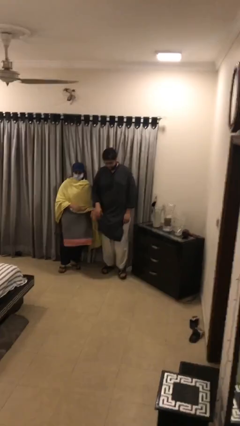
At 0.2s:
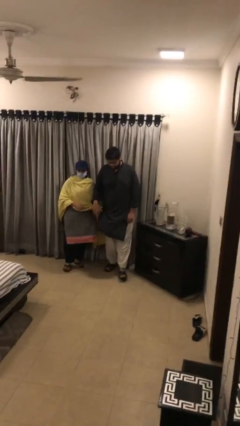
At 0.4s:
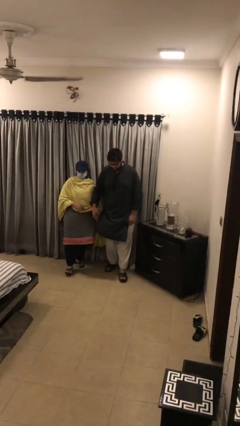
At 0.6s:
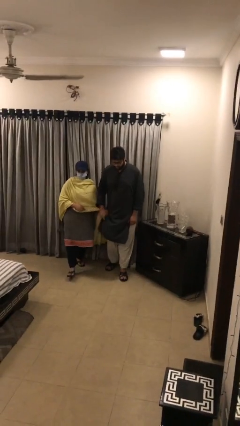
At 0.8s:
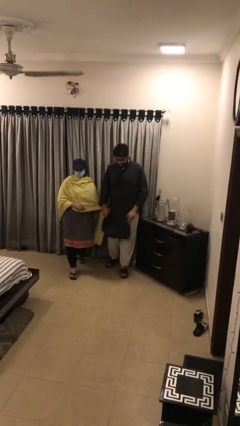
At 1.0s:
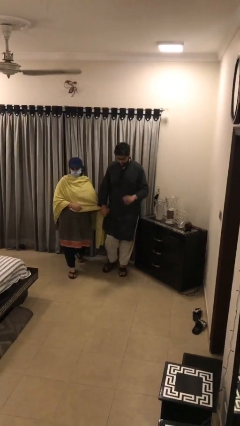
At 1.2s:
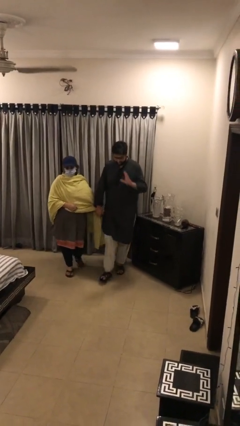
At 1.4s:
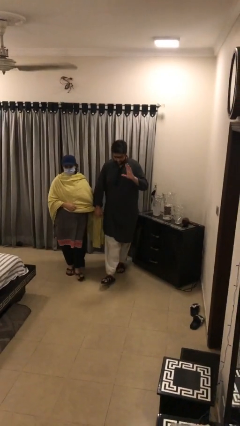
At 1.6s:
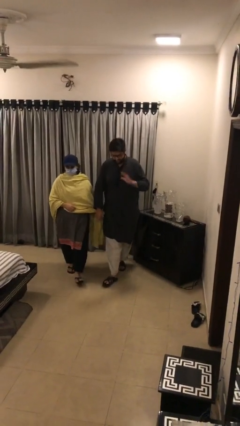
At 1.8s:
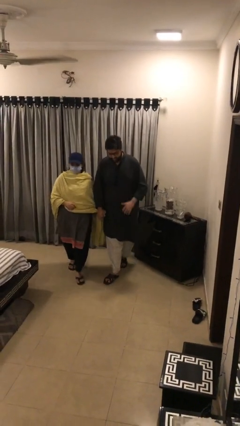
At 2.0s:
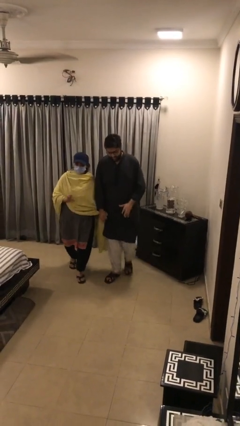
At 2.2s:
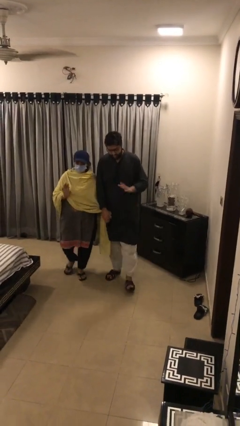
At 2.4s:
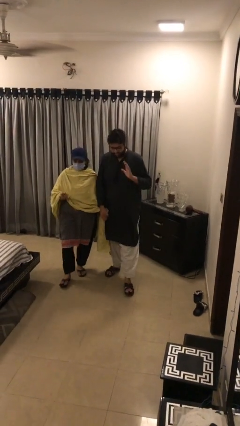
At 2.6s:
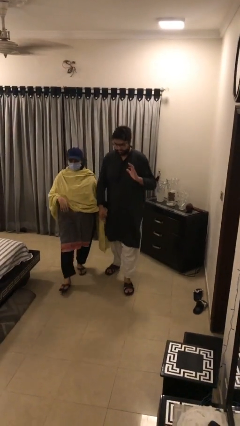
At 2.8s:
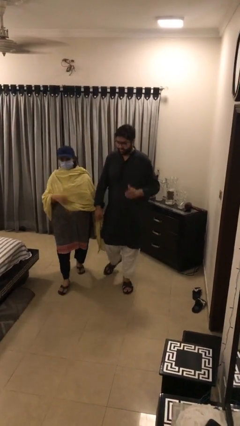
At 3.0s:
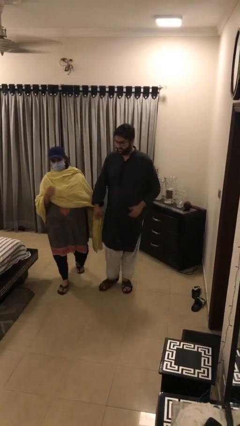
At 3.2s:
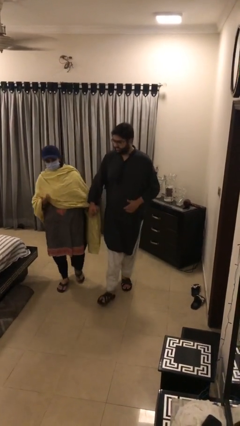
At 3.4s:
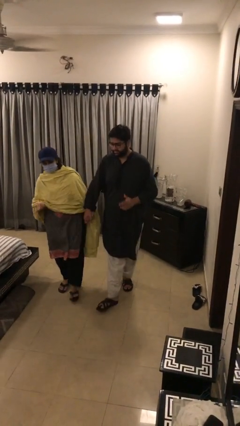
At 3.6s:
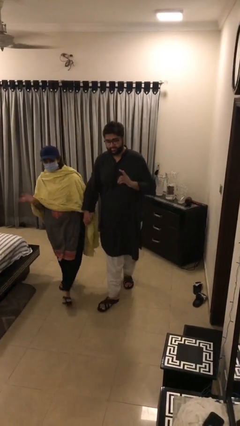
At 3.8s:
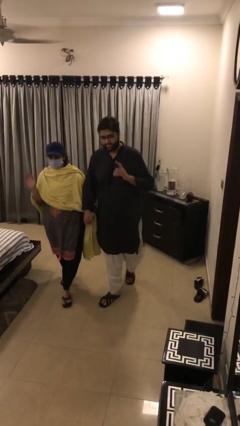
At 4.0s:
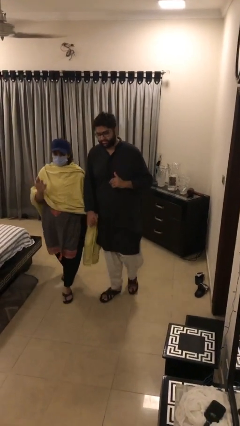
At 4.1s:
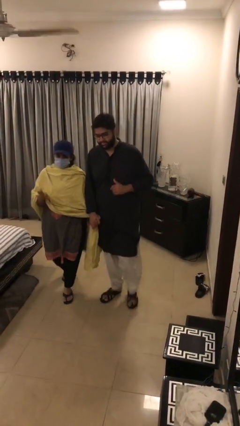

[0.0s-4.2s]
person holds hand

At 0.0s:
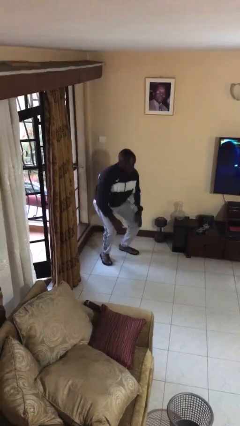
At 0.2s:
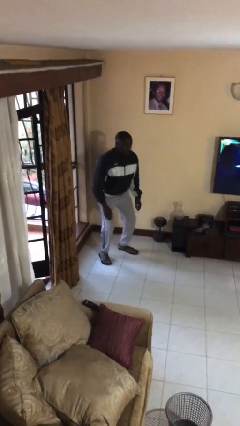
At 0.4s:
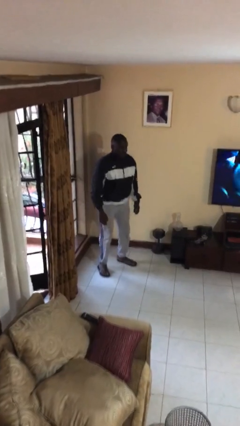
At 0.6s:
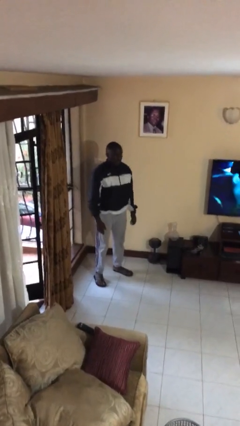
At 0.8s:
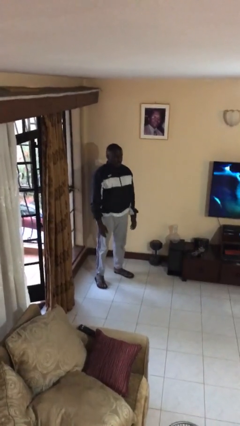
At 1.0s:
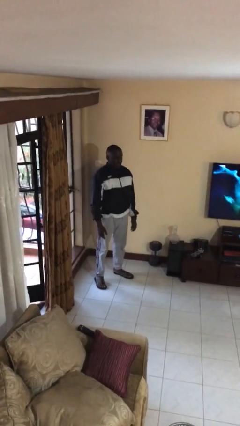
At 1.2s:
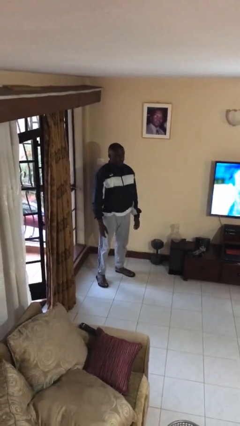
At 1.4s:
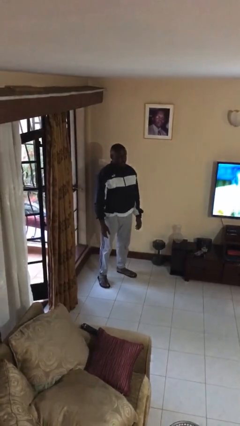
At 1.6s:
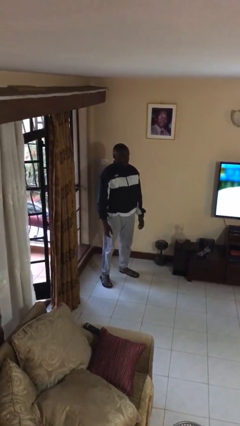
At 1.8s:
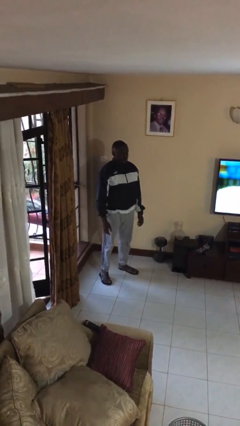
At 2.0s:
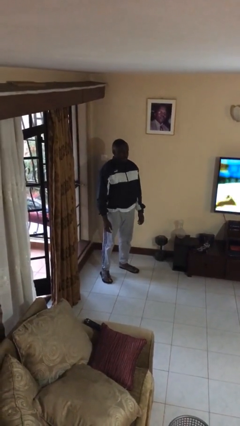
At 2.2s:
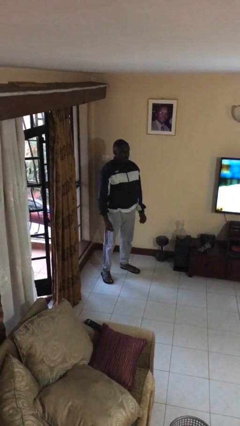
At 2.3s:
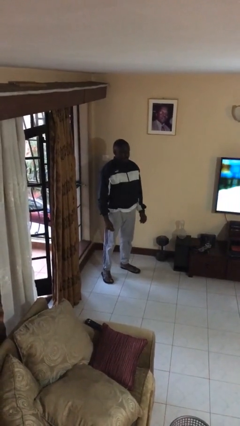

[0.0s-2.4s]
person stands up

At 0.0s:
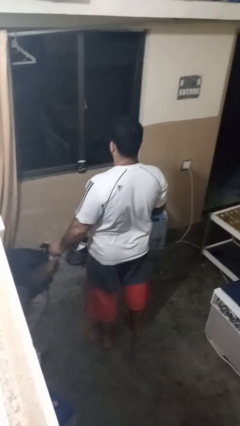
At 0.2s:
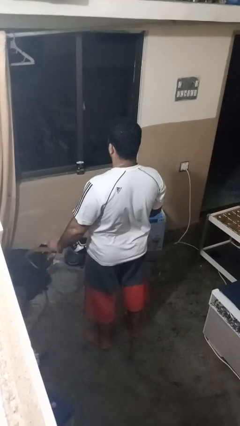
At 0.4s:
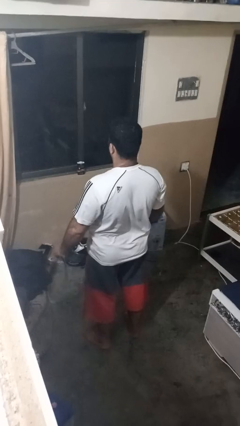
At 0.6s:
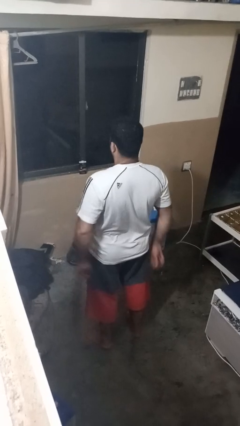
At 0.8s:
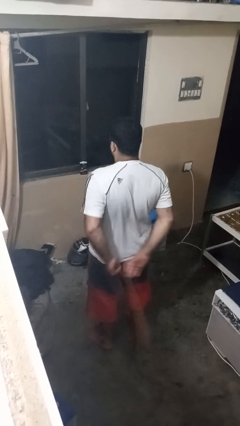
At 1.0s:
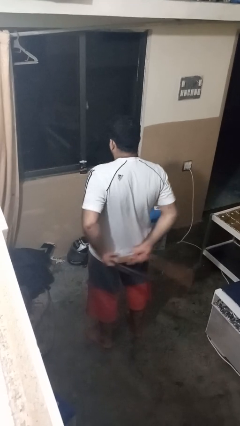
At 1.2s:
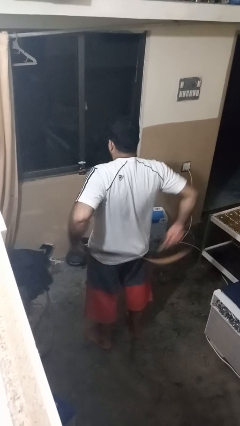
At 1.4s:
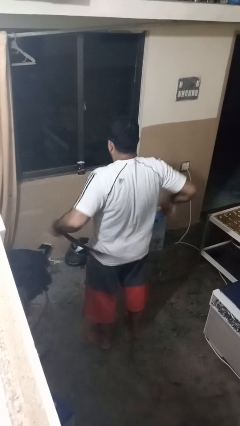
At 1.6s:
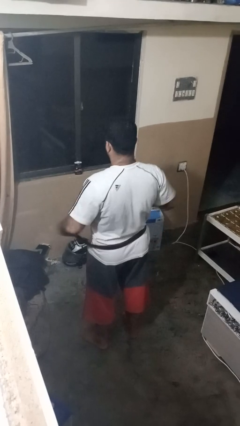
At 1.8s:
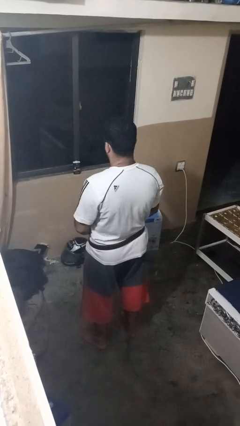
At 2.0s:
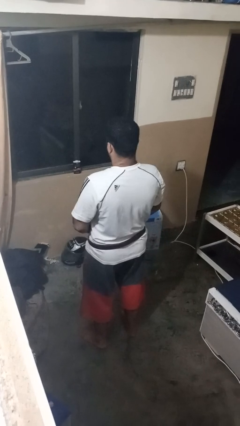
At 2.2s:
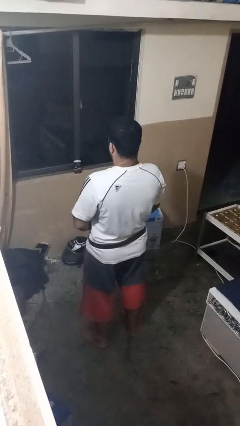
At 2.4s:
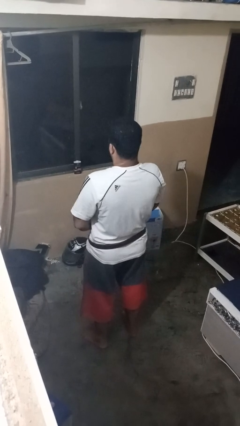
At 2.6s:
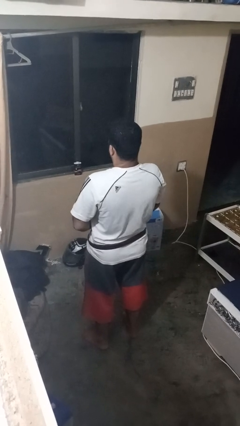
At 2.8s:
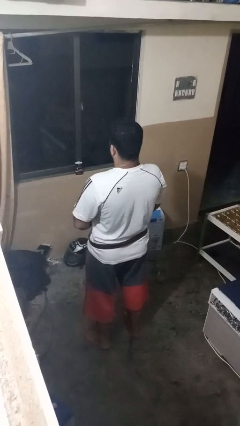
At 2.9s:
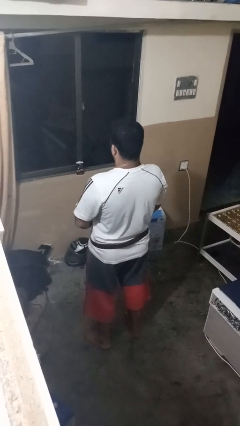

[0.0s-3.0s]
person puts on belt

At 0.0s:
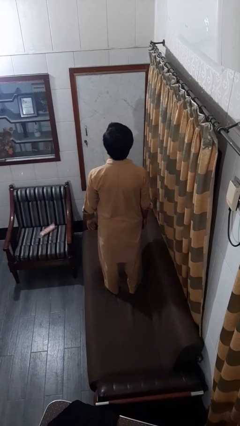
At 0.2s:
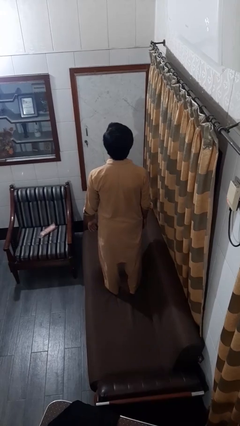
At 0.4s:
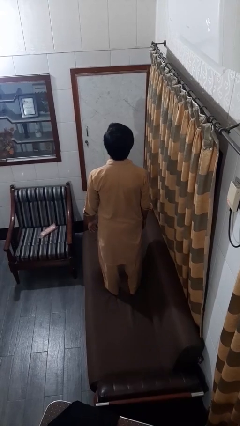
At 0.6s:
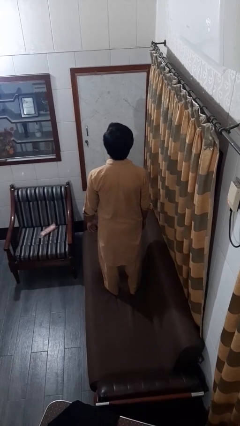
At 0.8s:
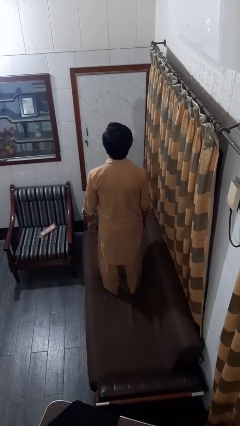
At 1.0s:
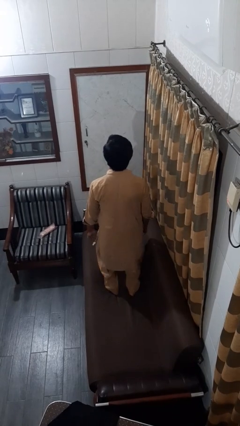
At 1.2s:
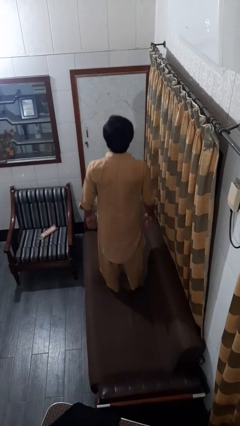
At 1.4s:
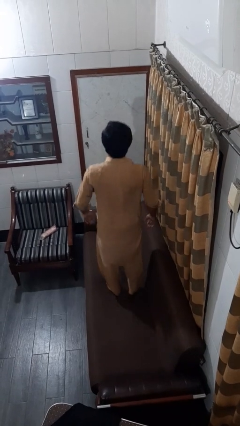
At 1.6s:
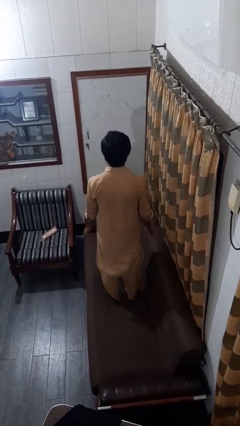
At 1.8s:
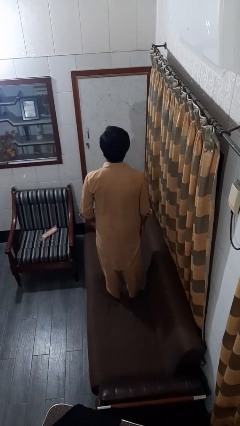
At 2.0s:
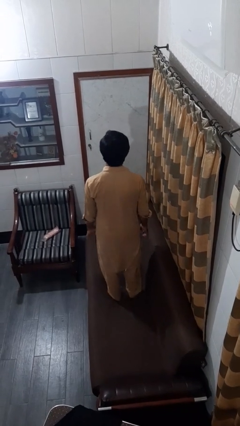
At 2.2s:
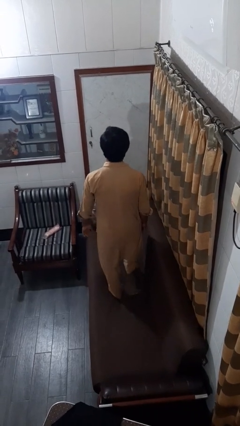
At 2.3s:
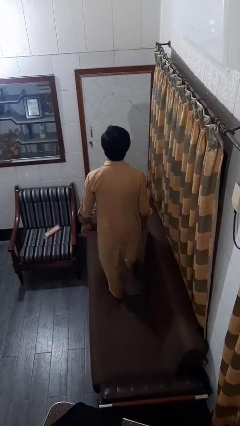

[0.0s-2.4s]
person jumps on couch

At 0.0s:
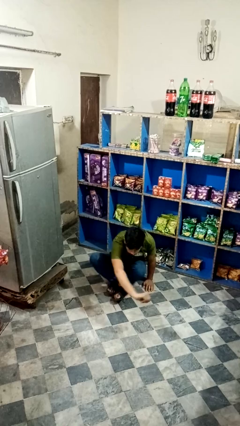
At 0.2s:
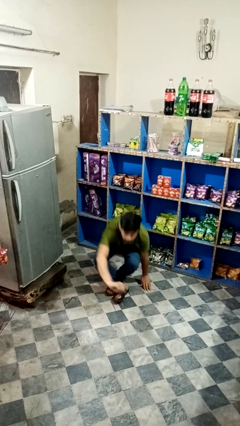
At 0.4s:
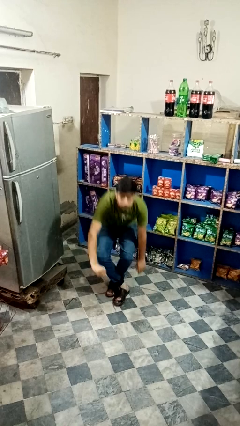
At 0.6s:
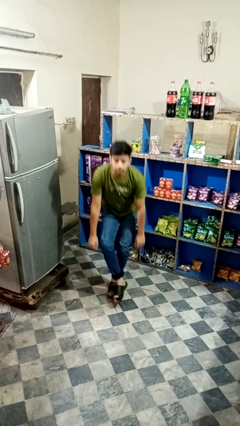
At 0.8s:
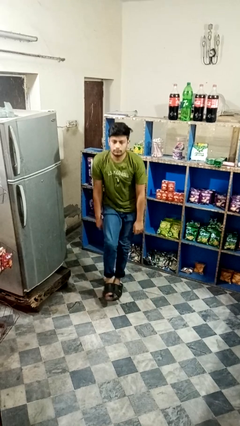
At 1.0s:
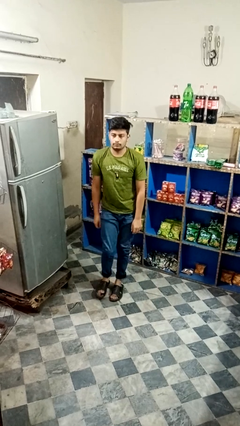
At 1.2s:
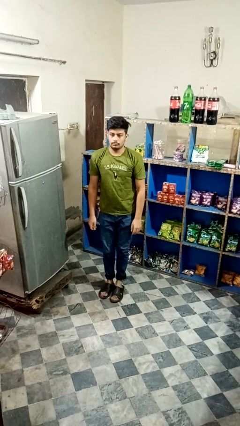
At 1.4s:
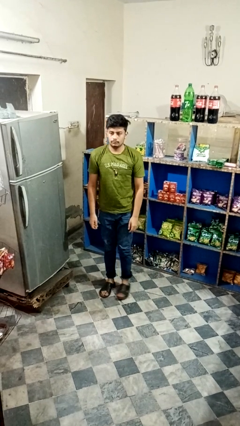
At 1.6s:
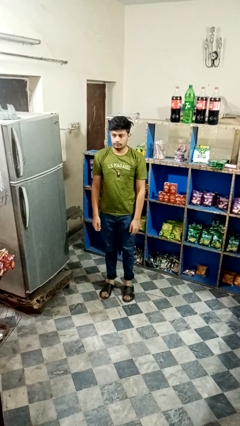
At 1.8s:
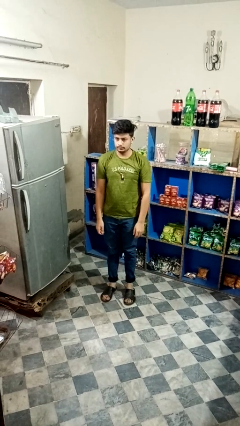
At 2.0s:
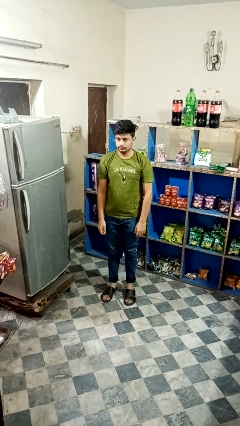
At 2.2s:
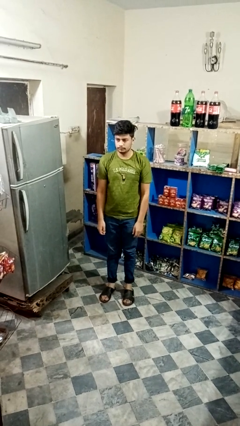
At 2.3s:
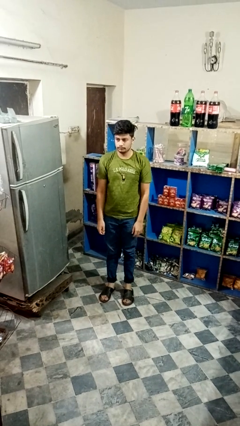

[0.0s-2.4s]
person stands up from floor

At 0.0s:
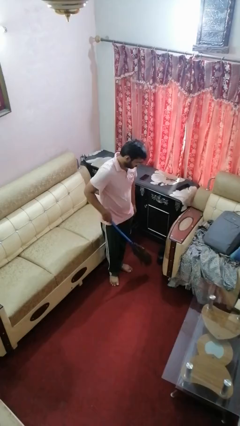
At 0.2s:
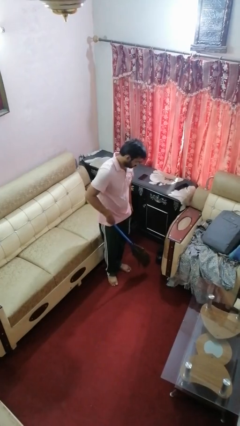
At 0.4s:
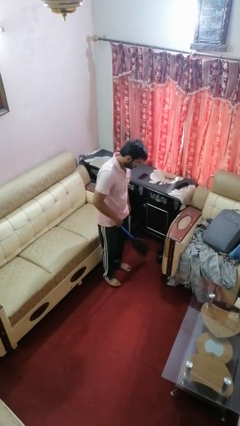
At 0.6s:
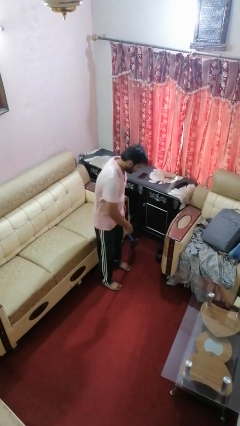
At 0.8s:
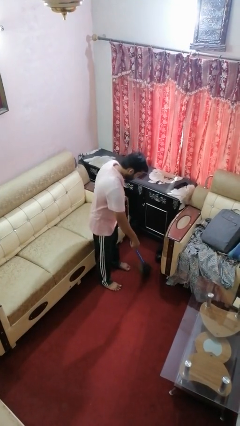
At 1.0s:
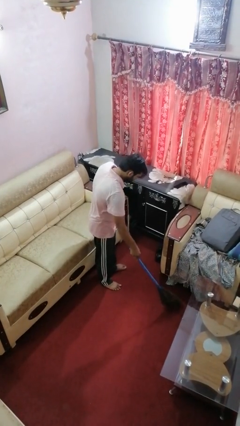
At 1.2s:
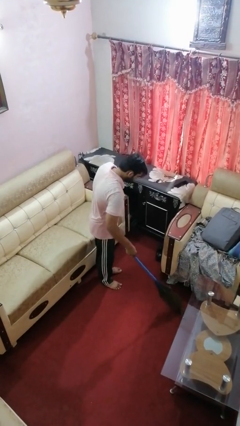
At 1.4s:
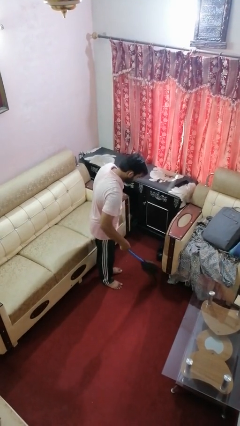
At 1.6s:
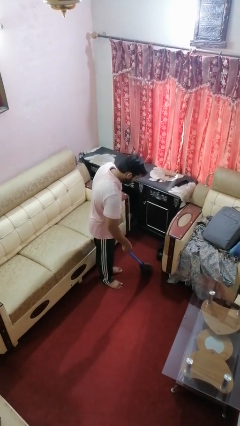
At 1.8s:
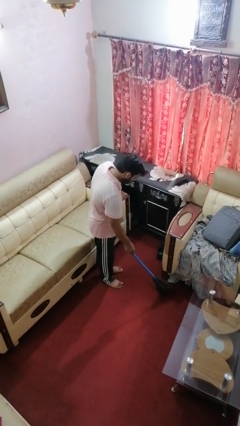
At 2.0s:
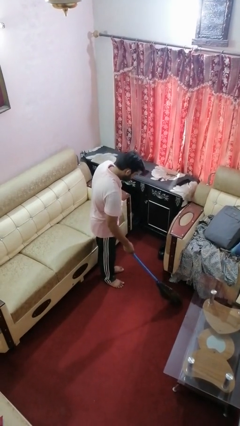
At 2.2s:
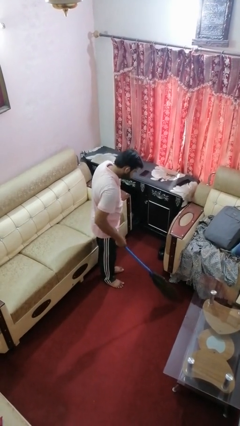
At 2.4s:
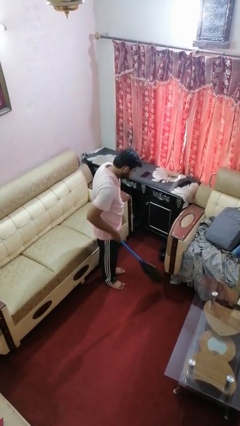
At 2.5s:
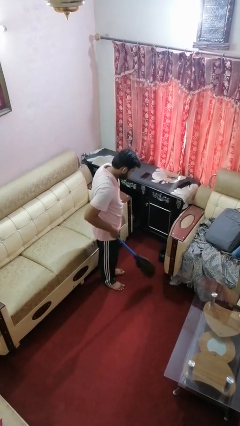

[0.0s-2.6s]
person sweeps floor
